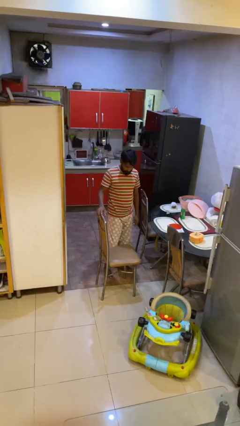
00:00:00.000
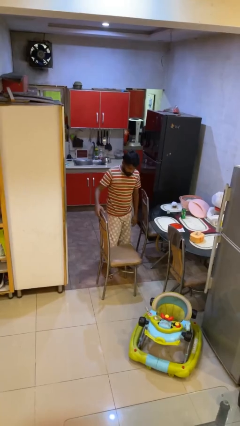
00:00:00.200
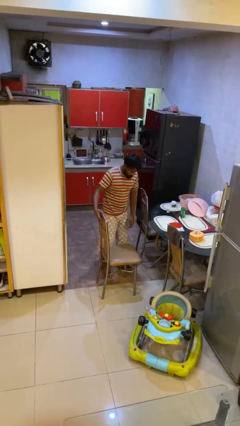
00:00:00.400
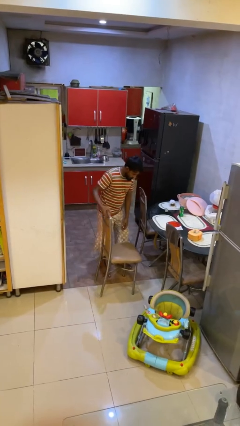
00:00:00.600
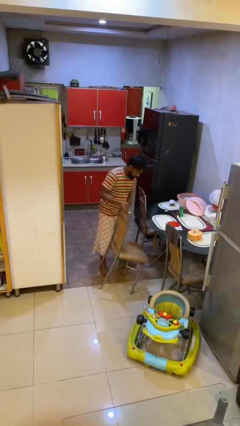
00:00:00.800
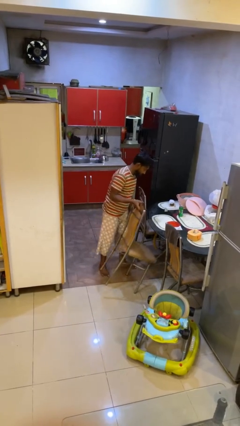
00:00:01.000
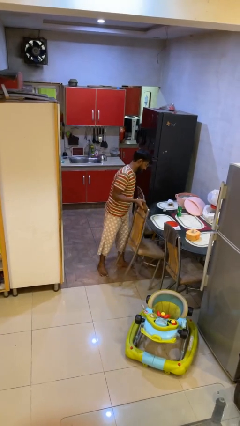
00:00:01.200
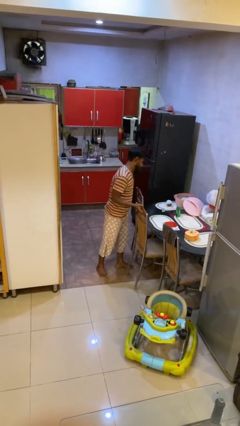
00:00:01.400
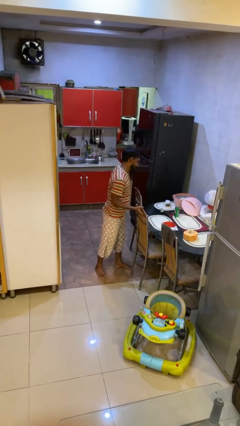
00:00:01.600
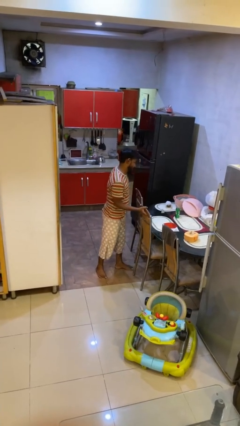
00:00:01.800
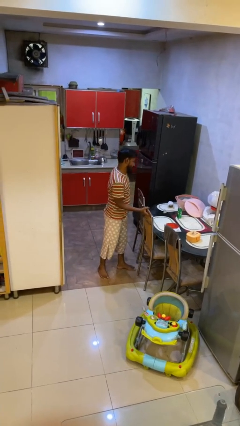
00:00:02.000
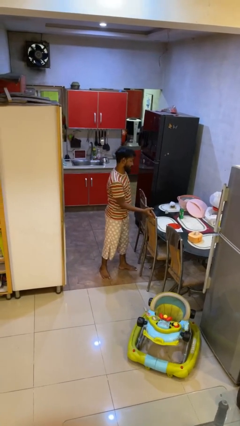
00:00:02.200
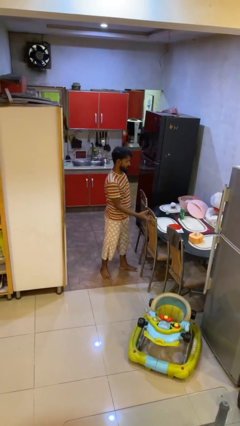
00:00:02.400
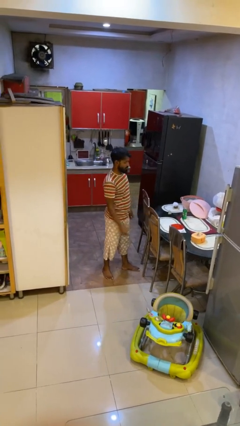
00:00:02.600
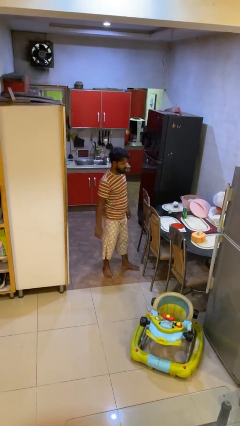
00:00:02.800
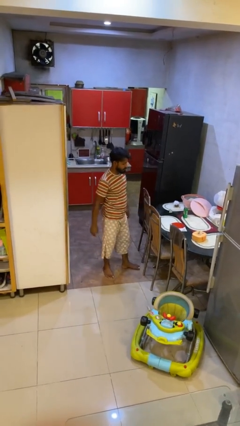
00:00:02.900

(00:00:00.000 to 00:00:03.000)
person pushes in chair

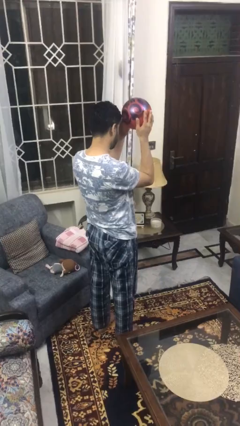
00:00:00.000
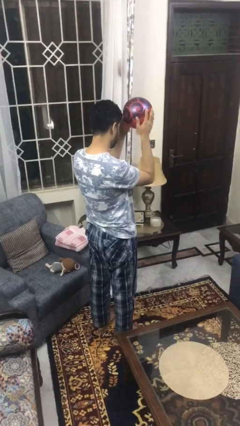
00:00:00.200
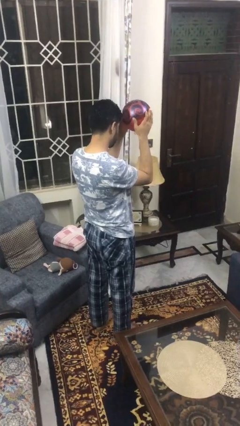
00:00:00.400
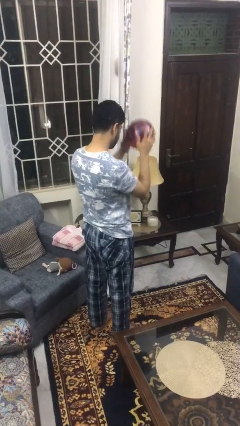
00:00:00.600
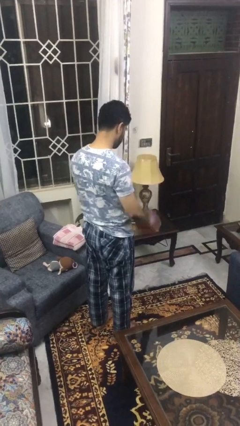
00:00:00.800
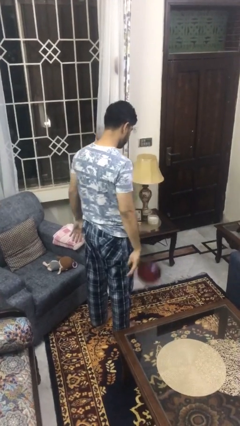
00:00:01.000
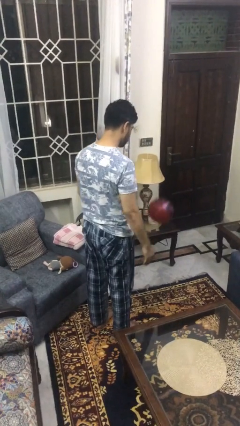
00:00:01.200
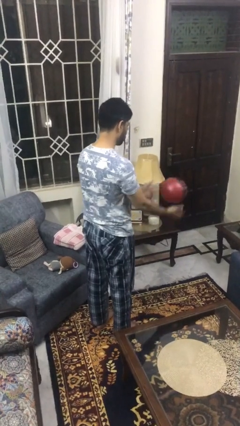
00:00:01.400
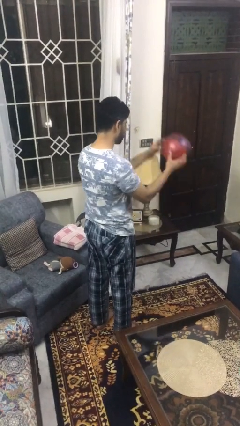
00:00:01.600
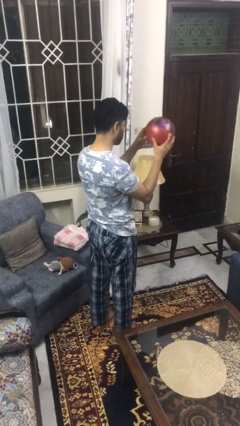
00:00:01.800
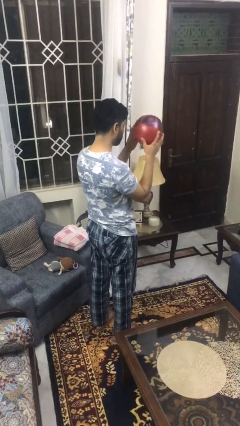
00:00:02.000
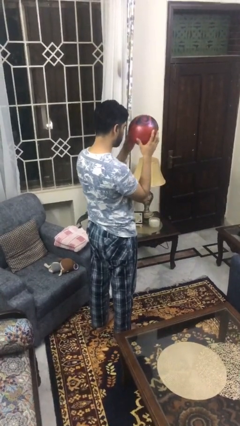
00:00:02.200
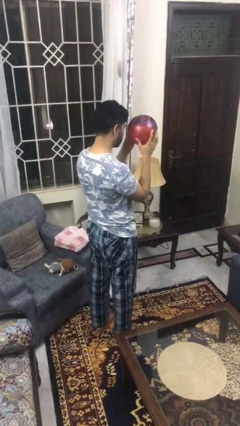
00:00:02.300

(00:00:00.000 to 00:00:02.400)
person bounces ball on floor

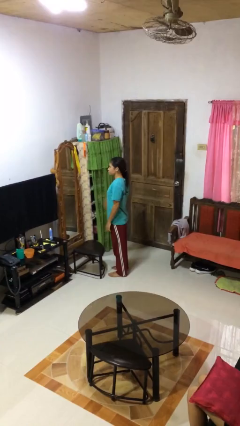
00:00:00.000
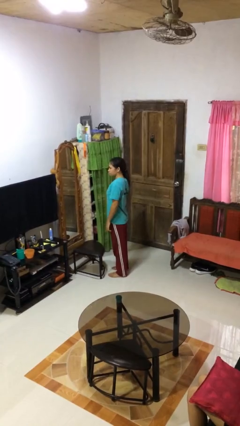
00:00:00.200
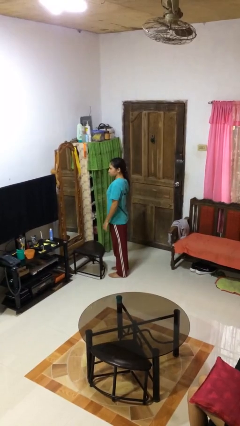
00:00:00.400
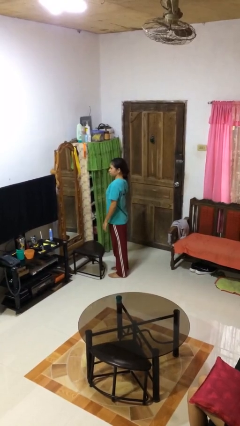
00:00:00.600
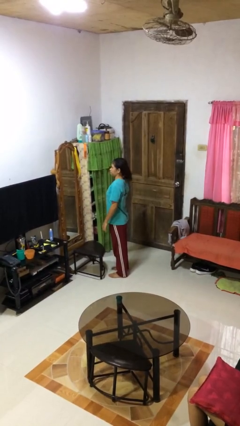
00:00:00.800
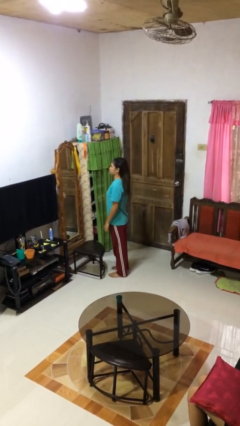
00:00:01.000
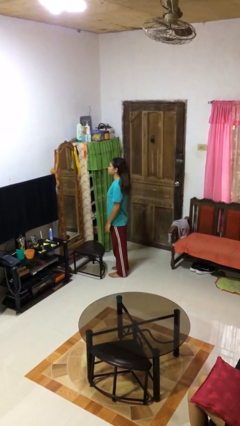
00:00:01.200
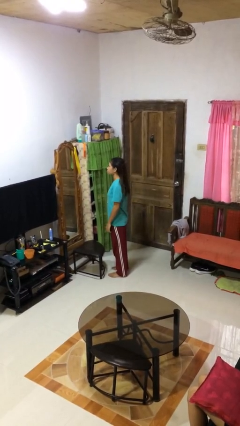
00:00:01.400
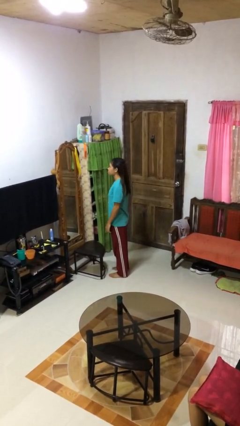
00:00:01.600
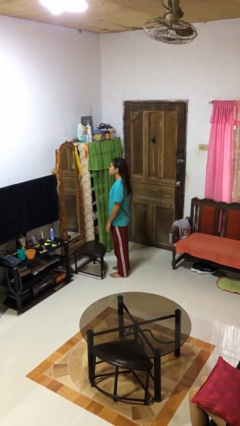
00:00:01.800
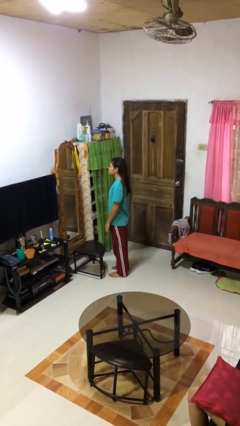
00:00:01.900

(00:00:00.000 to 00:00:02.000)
person takes off hairtie

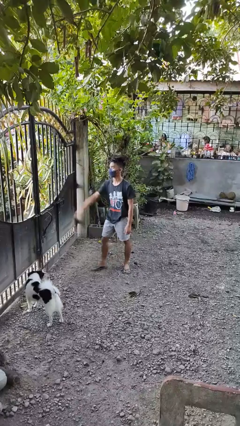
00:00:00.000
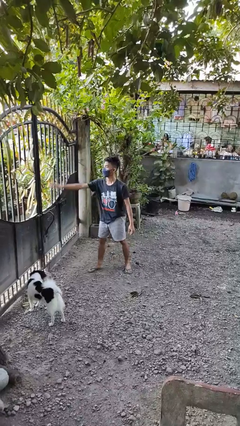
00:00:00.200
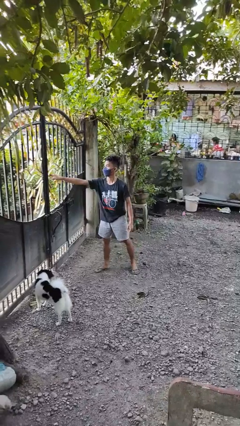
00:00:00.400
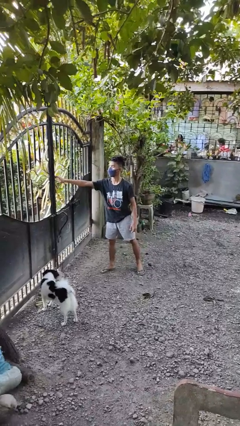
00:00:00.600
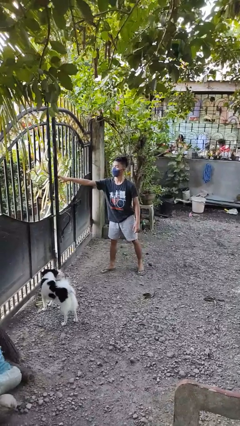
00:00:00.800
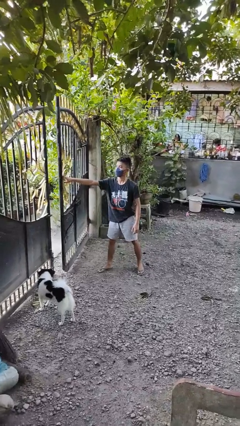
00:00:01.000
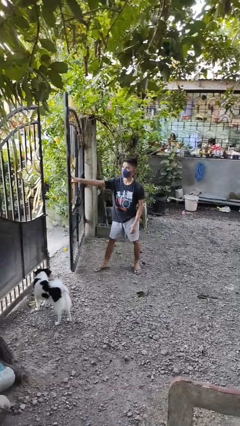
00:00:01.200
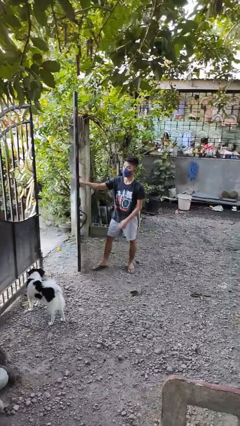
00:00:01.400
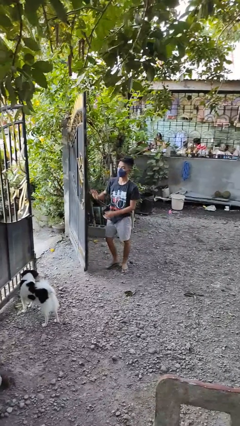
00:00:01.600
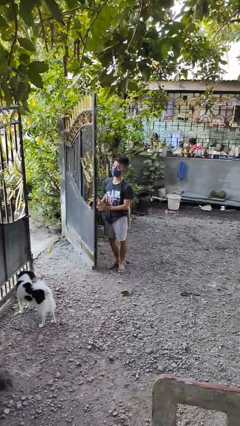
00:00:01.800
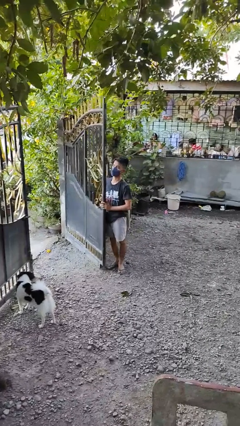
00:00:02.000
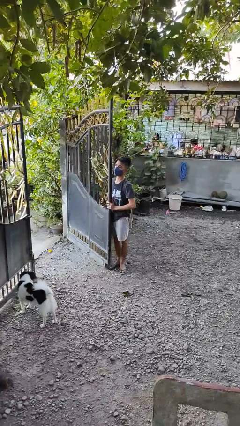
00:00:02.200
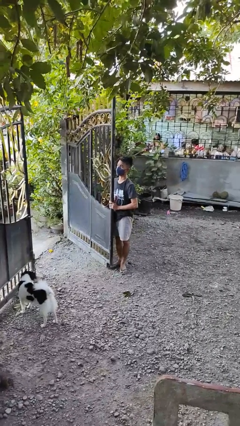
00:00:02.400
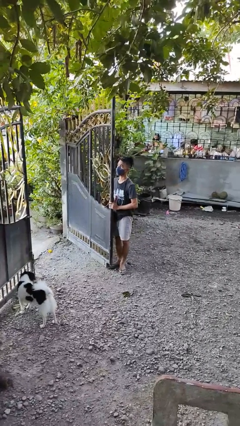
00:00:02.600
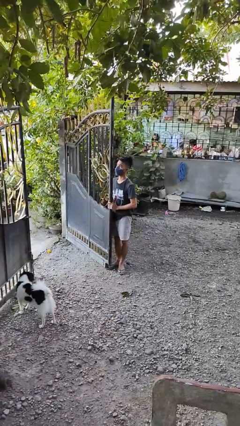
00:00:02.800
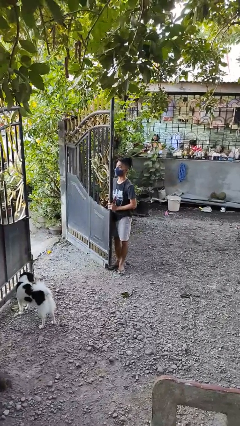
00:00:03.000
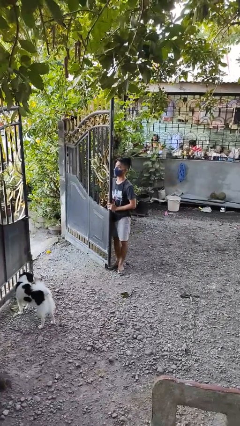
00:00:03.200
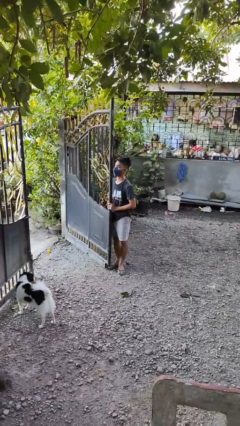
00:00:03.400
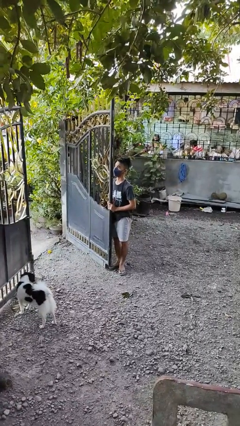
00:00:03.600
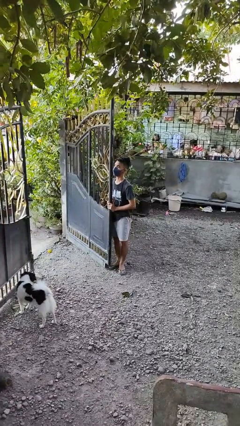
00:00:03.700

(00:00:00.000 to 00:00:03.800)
person opens gate

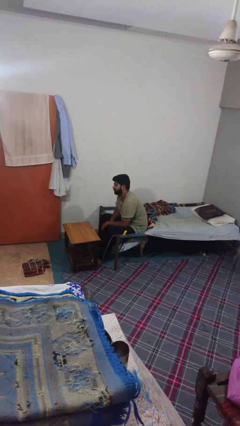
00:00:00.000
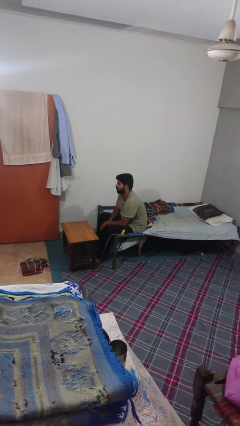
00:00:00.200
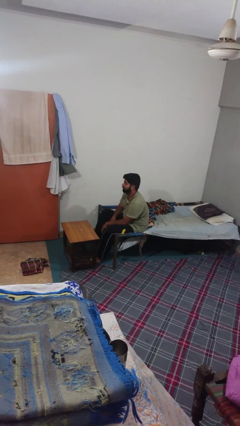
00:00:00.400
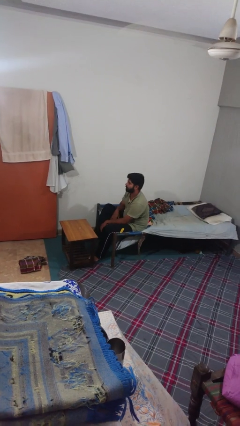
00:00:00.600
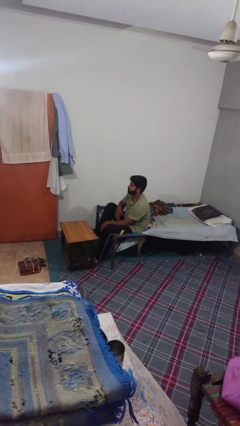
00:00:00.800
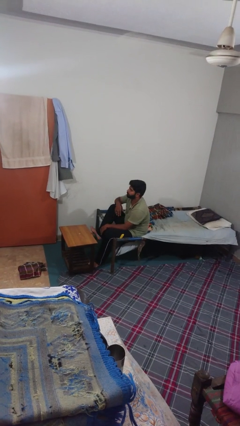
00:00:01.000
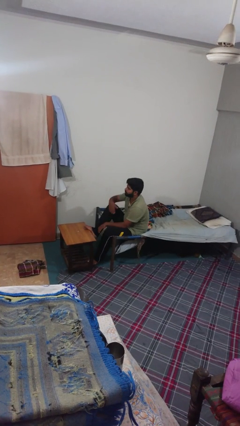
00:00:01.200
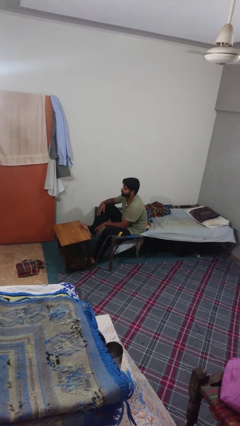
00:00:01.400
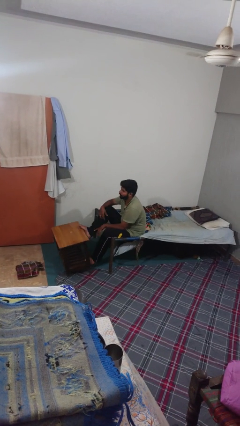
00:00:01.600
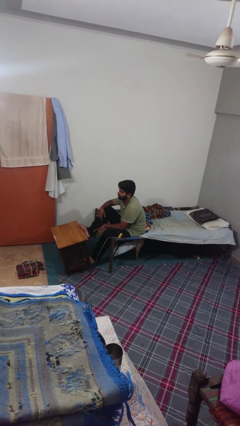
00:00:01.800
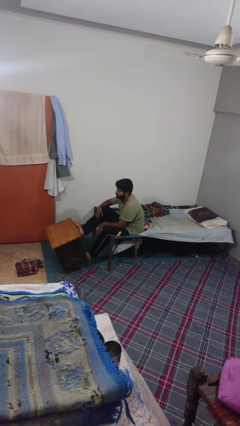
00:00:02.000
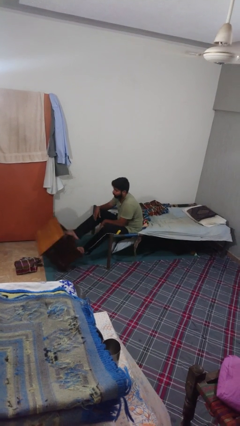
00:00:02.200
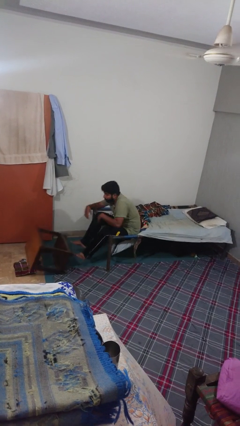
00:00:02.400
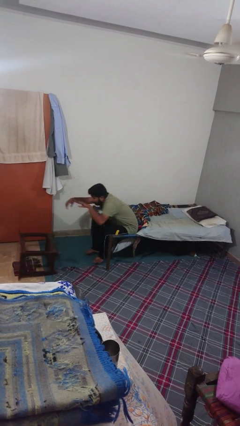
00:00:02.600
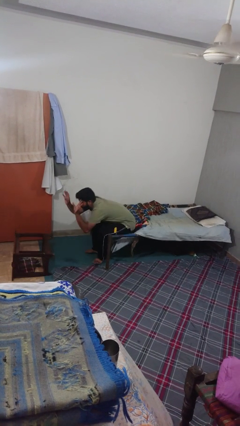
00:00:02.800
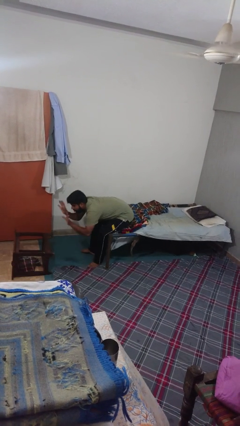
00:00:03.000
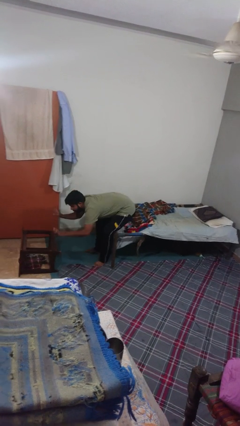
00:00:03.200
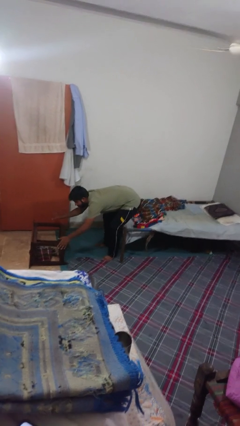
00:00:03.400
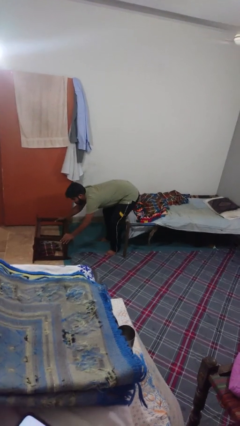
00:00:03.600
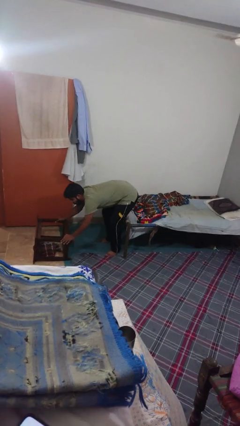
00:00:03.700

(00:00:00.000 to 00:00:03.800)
person knocks over furniture

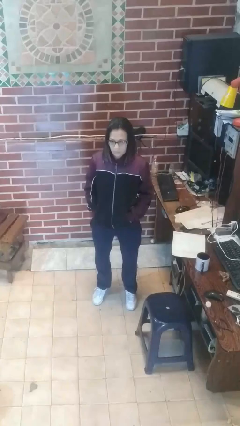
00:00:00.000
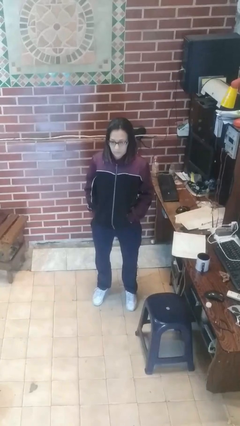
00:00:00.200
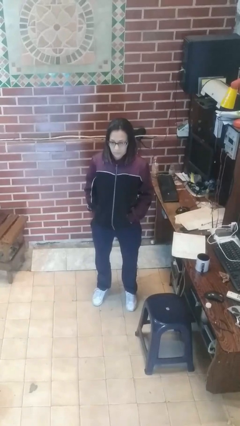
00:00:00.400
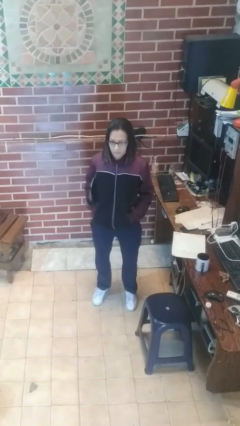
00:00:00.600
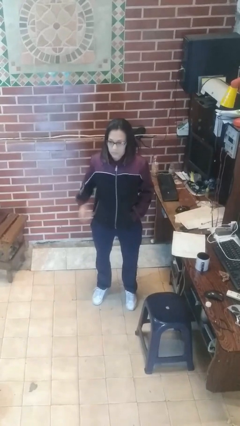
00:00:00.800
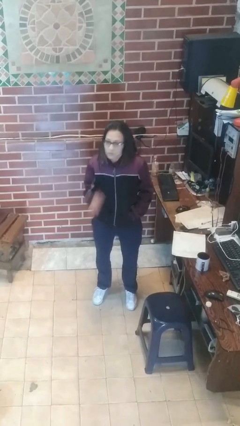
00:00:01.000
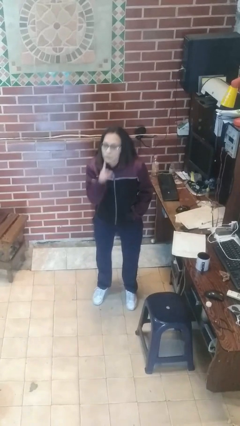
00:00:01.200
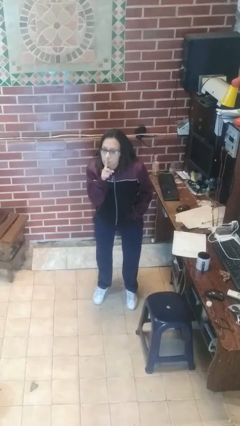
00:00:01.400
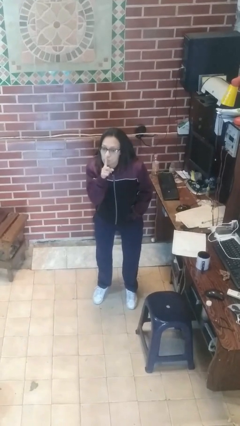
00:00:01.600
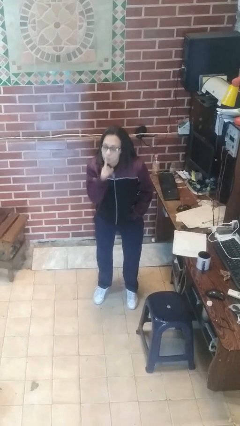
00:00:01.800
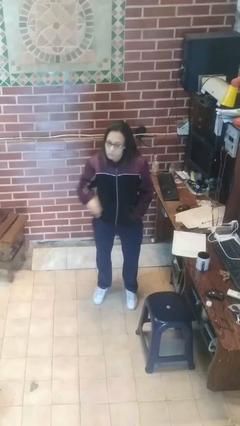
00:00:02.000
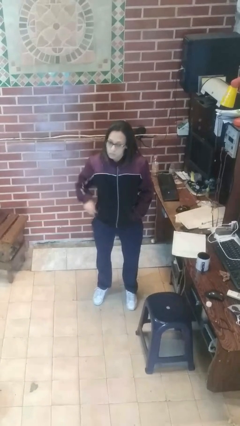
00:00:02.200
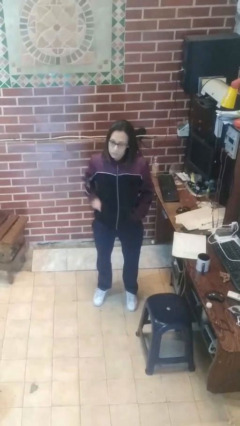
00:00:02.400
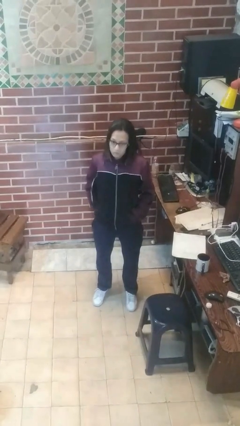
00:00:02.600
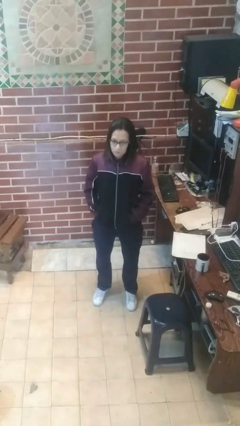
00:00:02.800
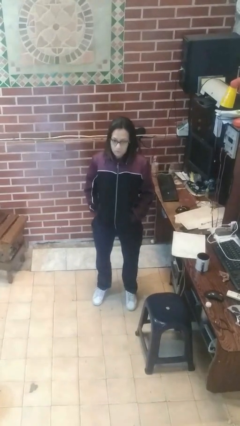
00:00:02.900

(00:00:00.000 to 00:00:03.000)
person gestures be quiet
